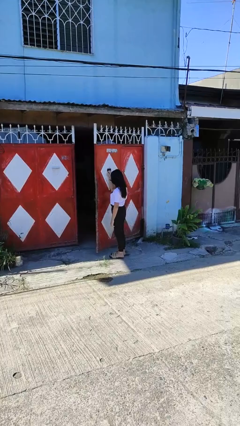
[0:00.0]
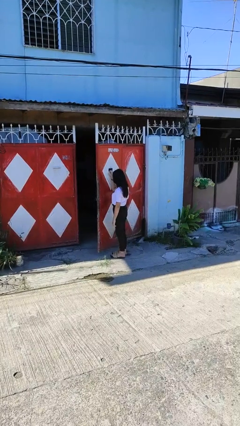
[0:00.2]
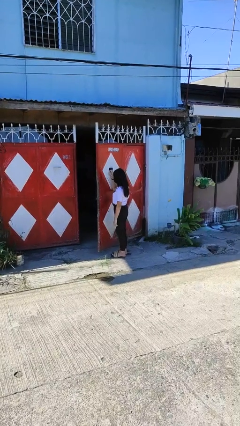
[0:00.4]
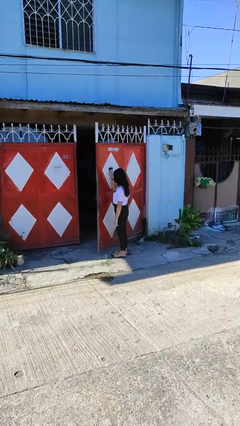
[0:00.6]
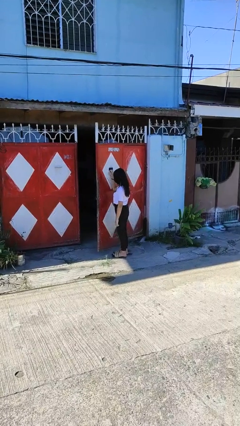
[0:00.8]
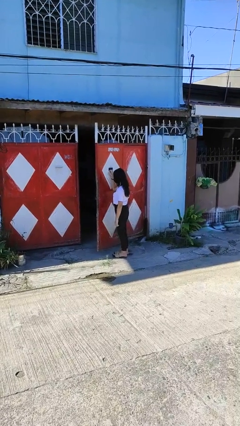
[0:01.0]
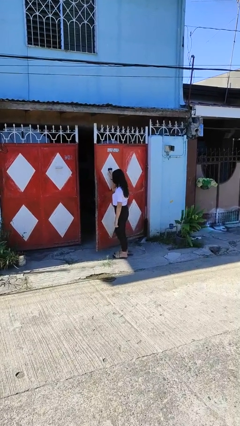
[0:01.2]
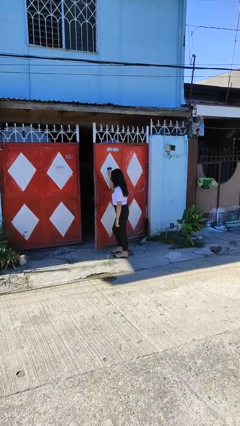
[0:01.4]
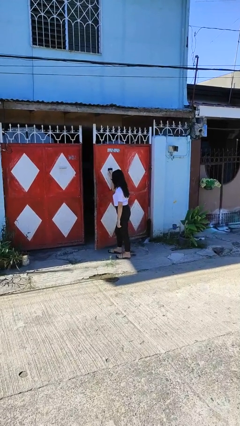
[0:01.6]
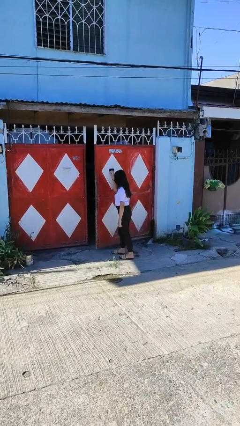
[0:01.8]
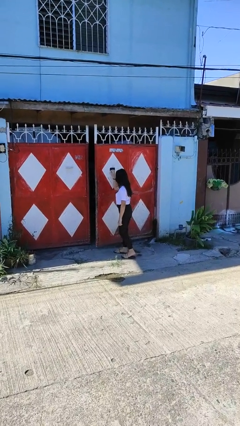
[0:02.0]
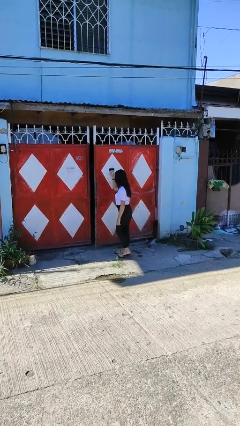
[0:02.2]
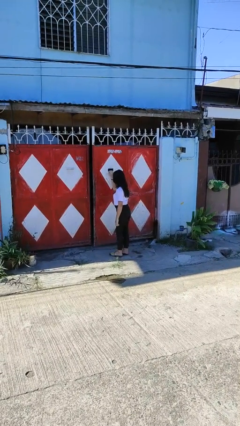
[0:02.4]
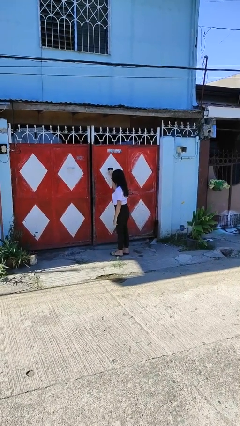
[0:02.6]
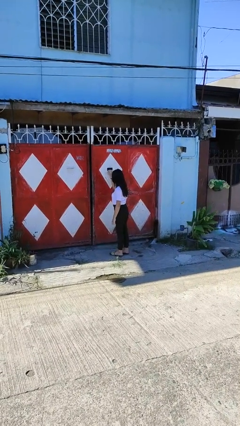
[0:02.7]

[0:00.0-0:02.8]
person closes gate

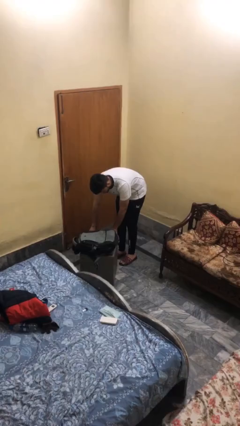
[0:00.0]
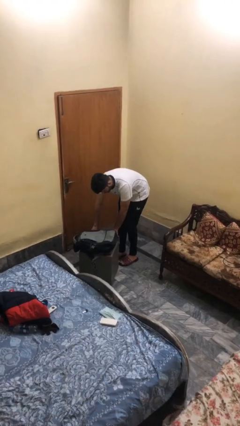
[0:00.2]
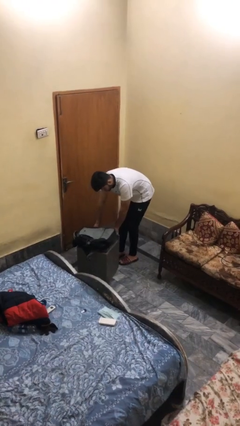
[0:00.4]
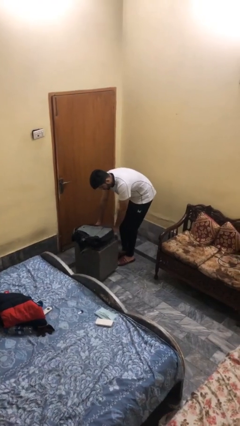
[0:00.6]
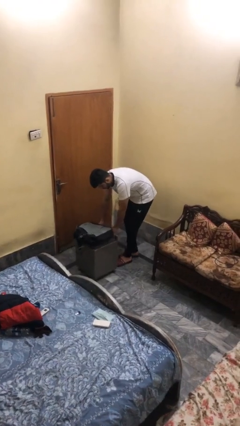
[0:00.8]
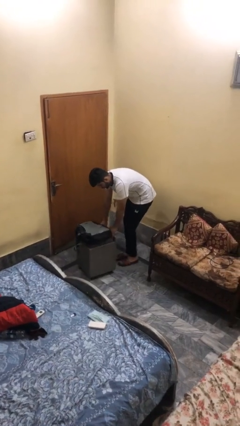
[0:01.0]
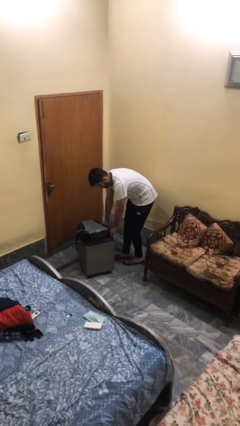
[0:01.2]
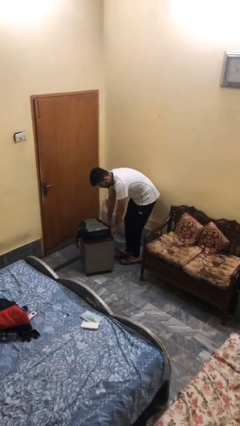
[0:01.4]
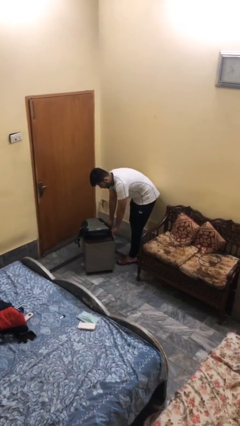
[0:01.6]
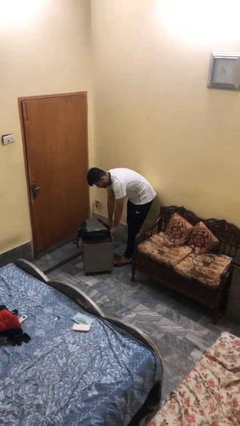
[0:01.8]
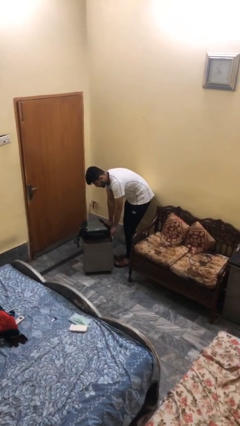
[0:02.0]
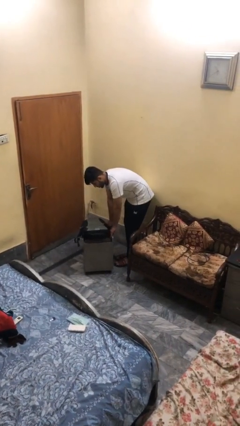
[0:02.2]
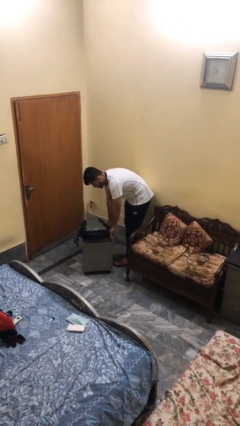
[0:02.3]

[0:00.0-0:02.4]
person pulls wheeled cart

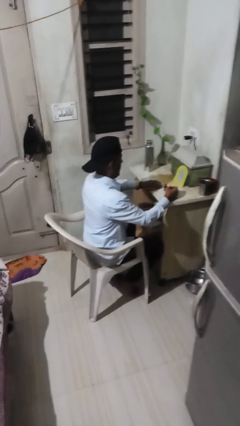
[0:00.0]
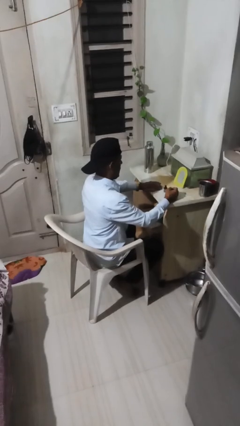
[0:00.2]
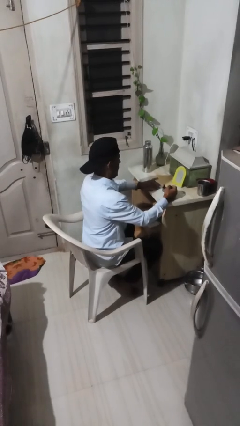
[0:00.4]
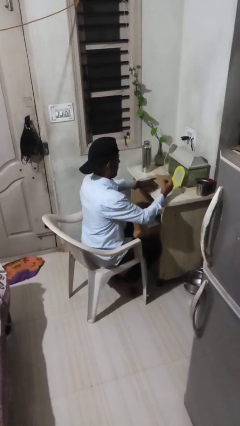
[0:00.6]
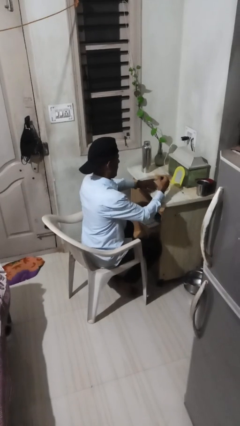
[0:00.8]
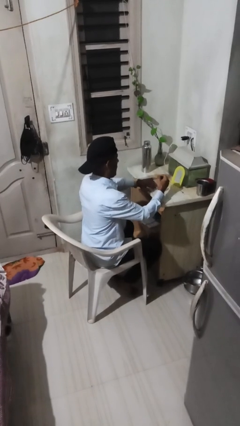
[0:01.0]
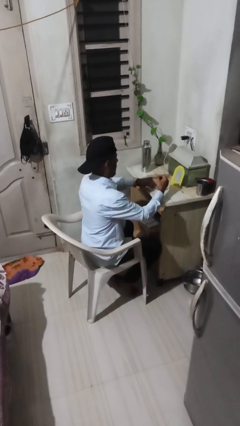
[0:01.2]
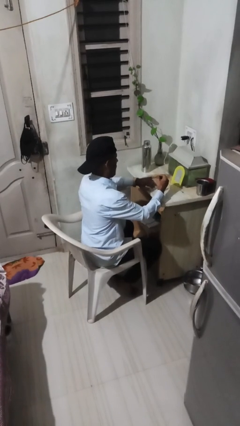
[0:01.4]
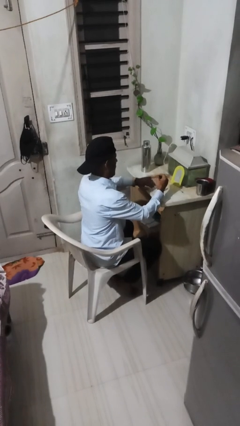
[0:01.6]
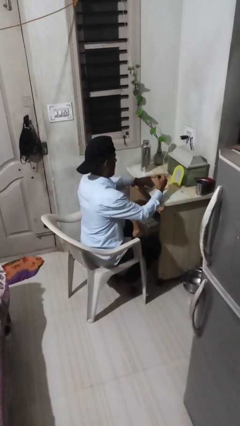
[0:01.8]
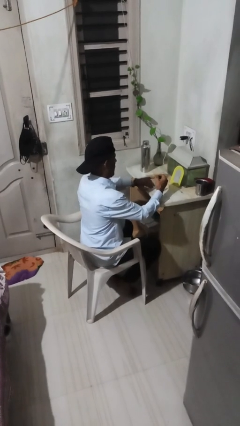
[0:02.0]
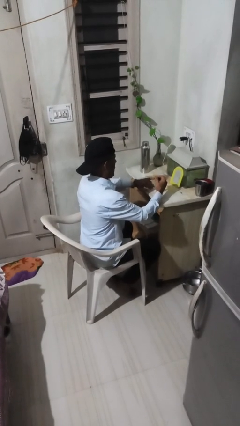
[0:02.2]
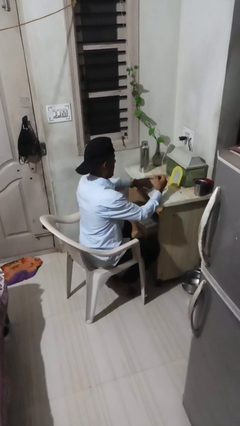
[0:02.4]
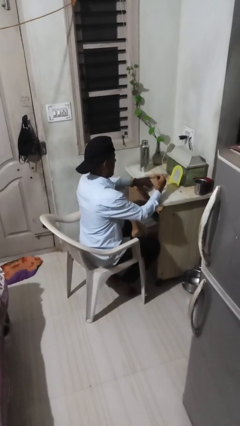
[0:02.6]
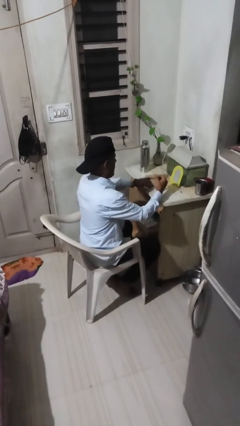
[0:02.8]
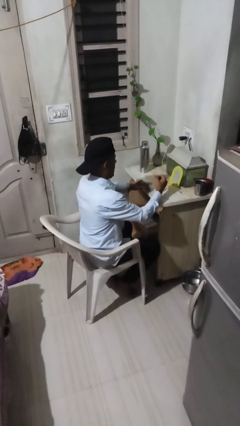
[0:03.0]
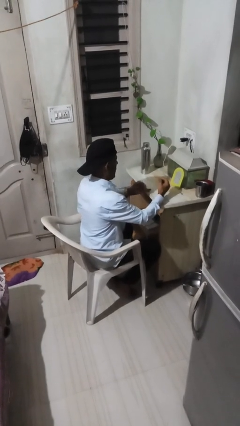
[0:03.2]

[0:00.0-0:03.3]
person paints fingernails

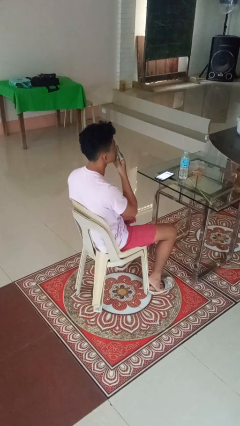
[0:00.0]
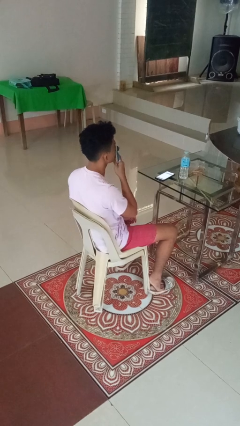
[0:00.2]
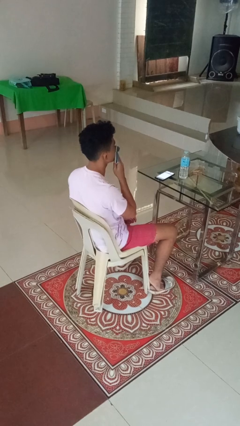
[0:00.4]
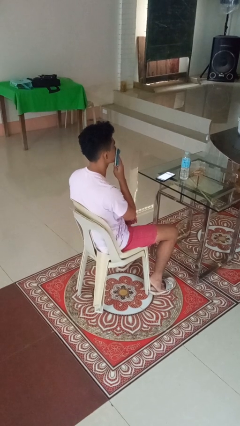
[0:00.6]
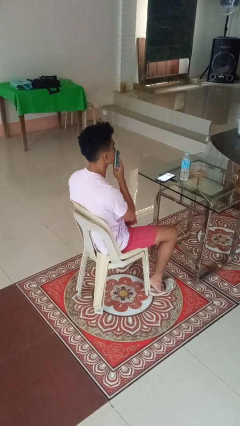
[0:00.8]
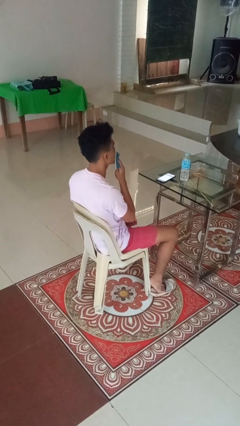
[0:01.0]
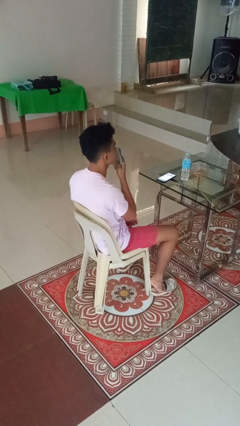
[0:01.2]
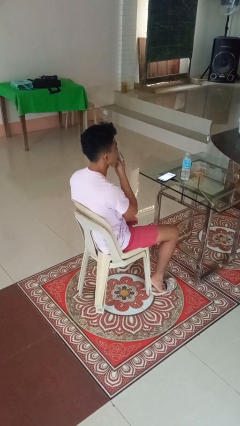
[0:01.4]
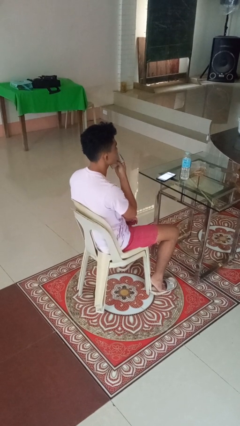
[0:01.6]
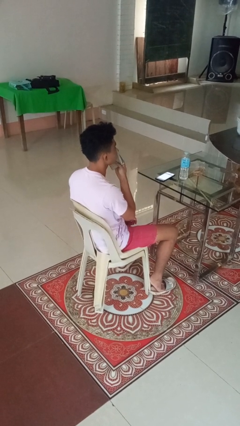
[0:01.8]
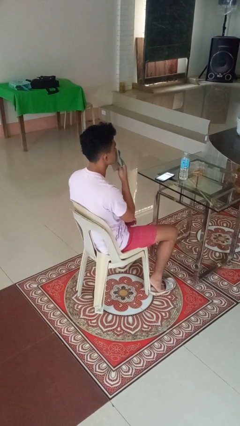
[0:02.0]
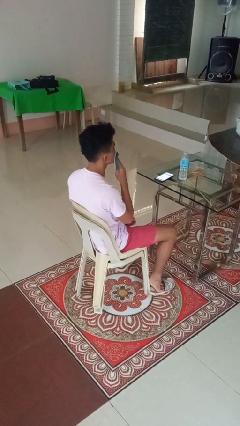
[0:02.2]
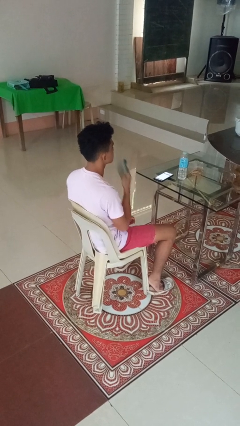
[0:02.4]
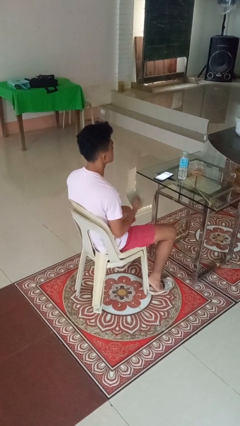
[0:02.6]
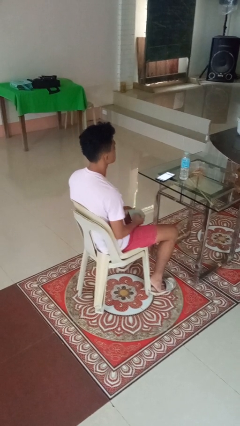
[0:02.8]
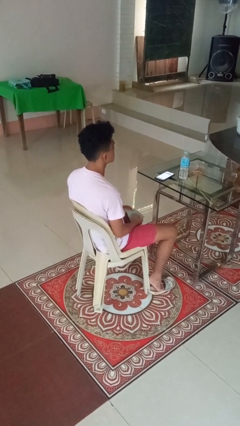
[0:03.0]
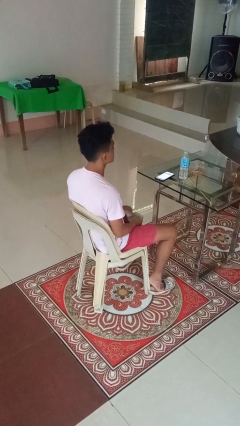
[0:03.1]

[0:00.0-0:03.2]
person wipes mouth with napkin

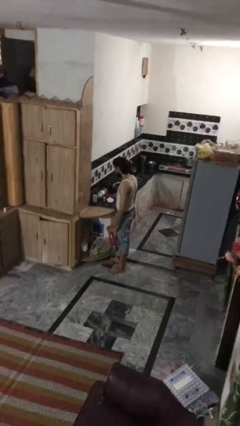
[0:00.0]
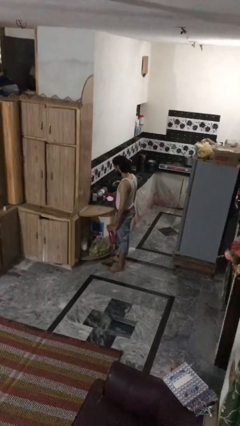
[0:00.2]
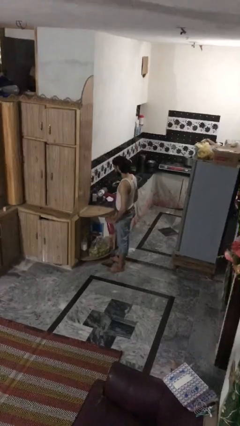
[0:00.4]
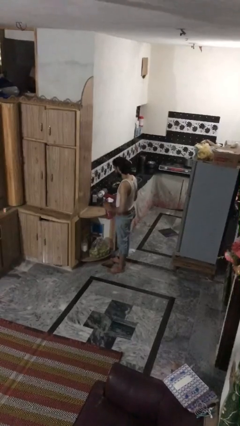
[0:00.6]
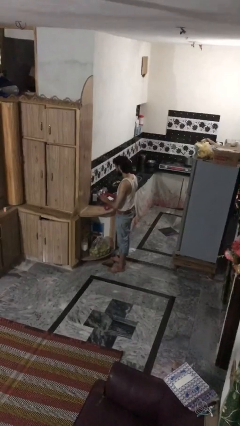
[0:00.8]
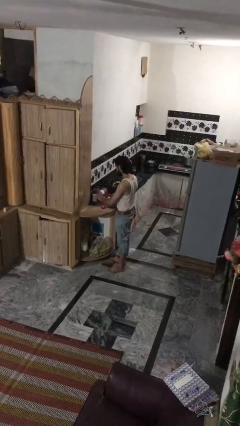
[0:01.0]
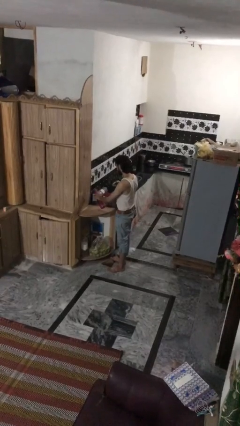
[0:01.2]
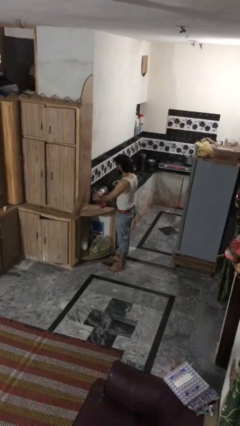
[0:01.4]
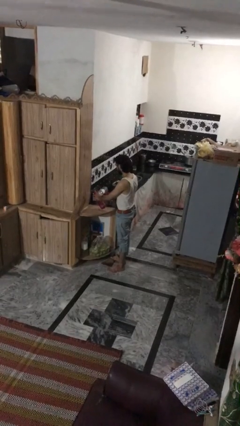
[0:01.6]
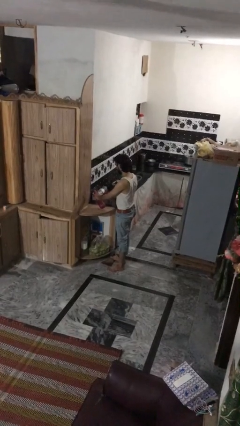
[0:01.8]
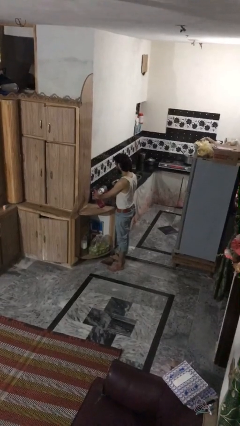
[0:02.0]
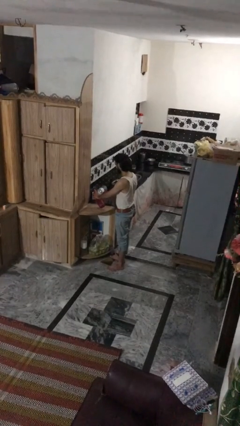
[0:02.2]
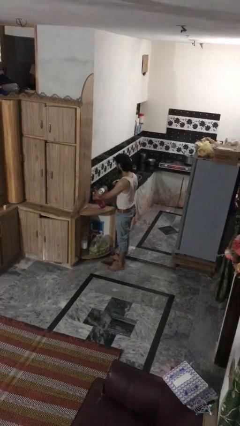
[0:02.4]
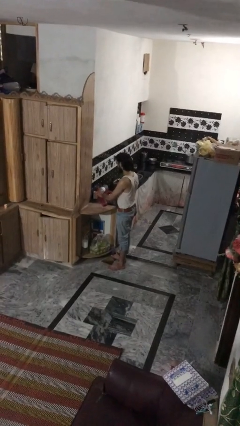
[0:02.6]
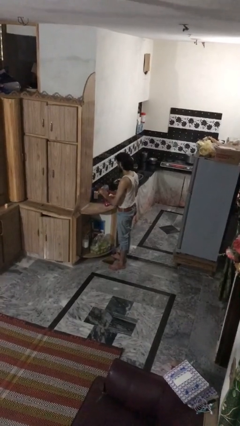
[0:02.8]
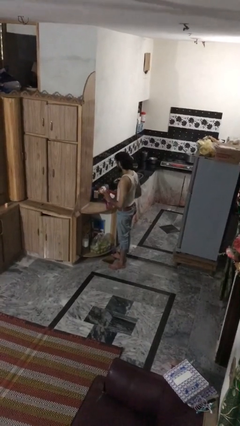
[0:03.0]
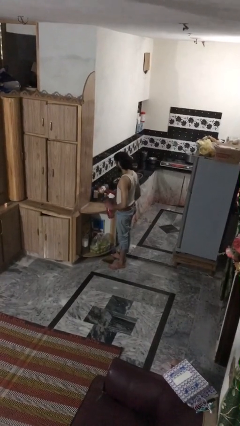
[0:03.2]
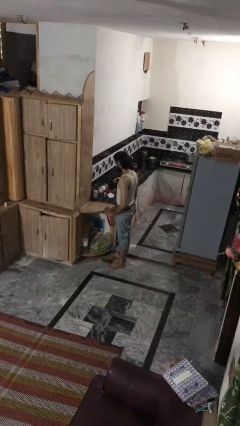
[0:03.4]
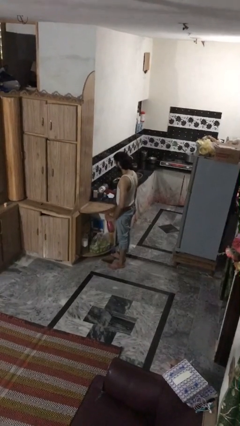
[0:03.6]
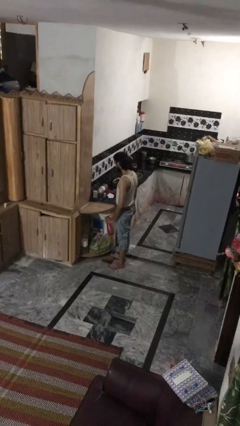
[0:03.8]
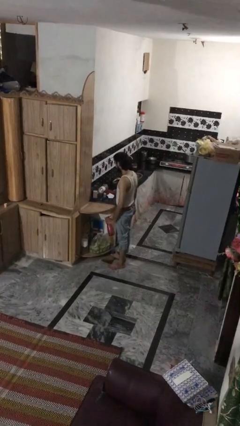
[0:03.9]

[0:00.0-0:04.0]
person sprays from bottle

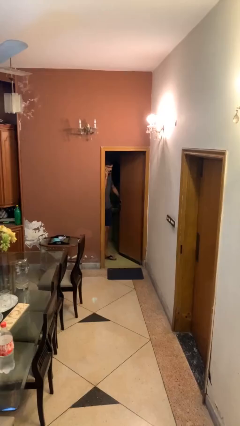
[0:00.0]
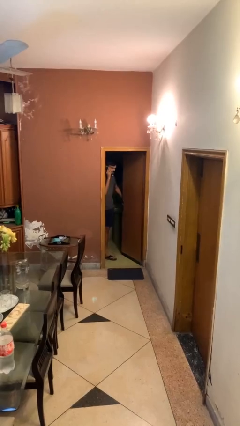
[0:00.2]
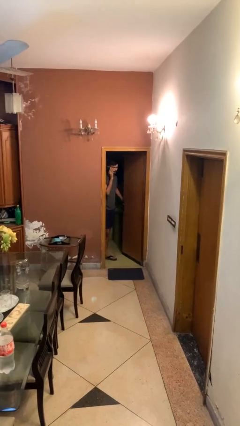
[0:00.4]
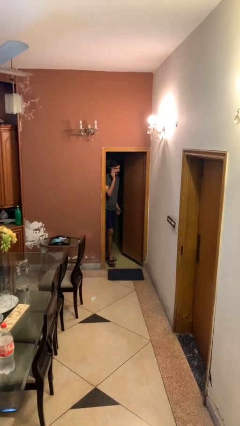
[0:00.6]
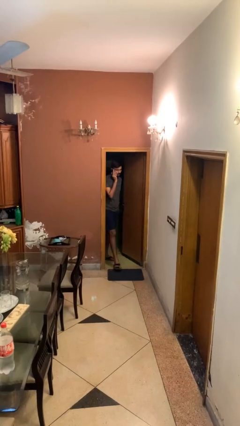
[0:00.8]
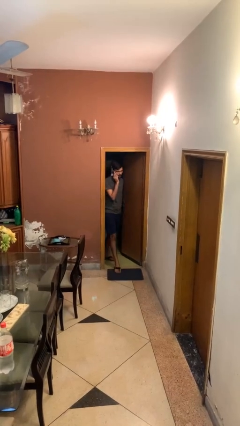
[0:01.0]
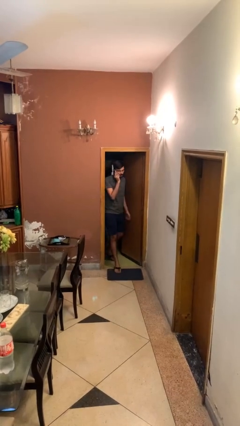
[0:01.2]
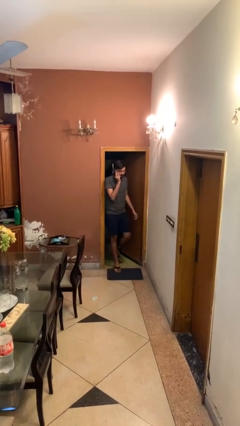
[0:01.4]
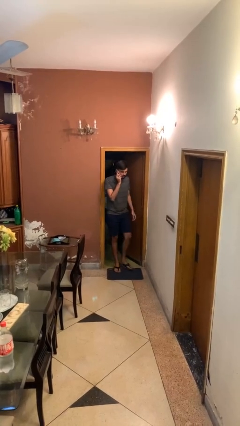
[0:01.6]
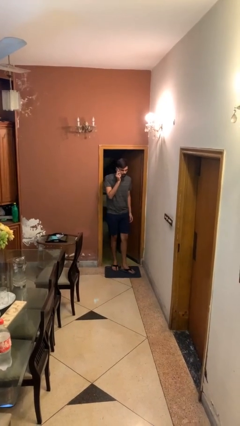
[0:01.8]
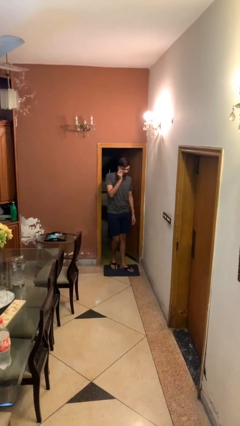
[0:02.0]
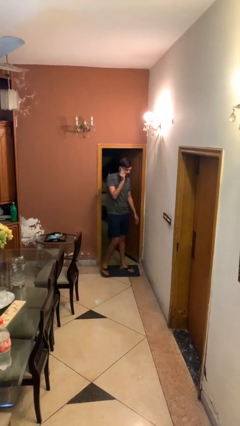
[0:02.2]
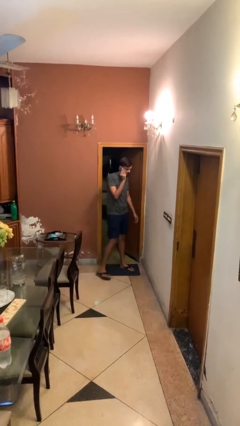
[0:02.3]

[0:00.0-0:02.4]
person enters scene through structure
